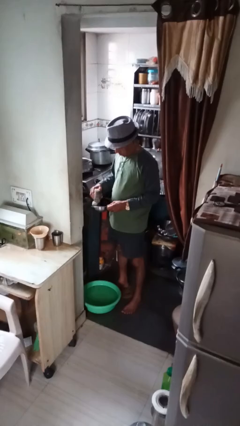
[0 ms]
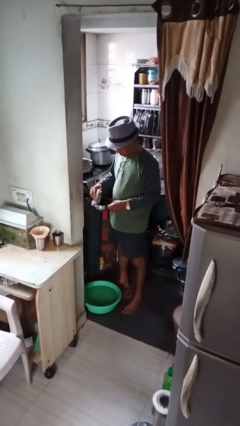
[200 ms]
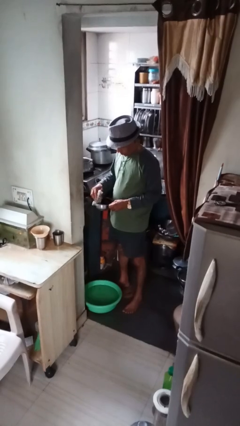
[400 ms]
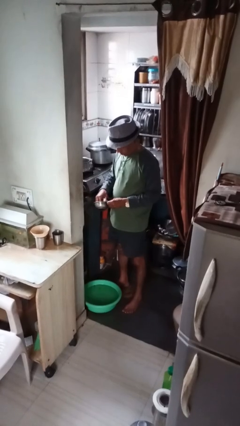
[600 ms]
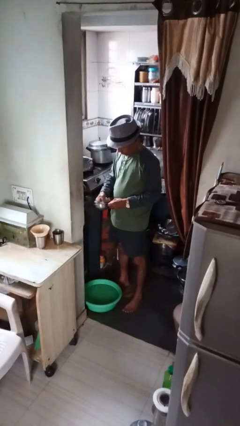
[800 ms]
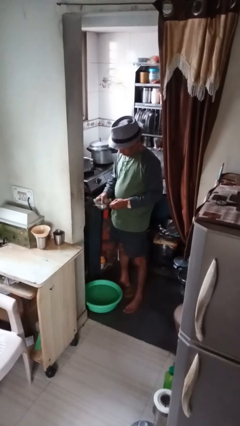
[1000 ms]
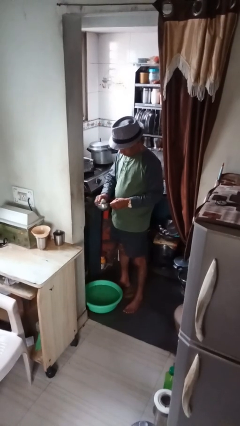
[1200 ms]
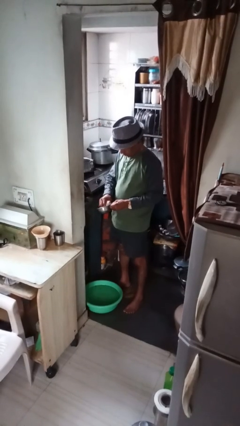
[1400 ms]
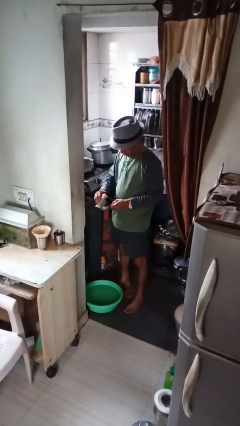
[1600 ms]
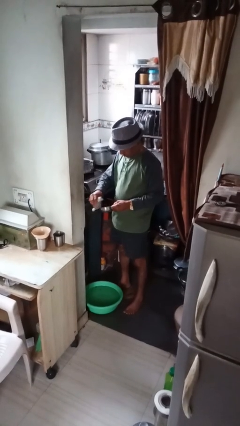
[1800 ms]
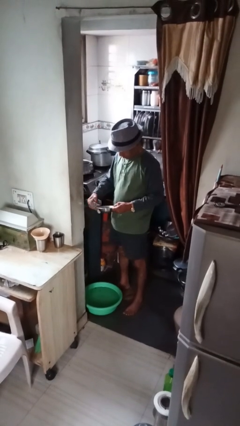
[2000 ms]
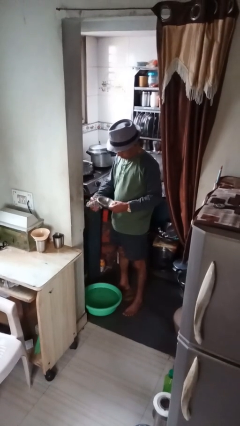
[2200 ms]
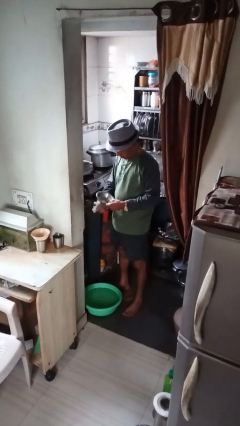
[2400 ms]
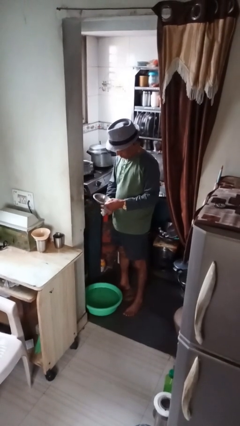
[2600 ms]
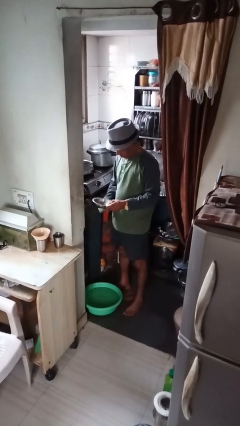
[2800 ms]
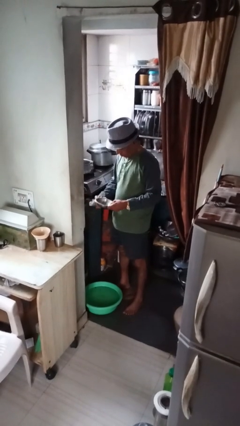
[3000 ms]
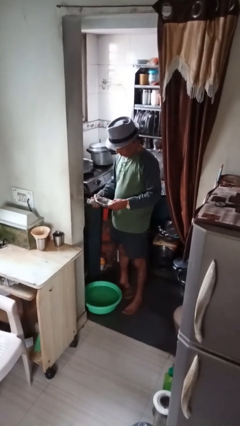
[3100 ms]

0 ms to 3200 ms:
person dries dish

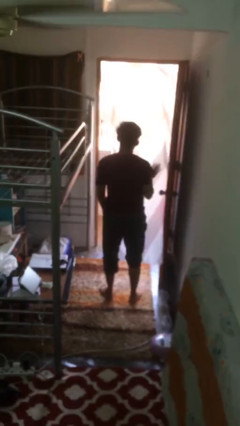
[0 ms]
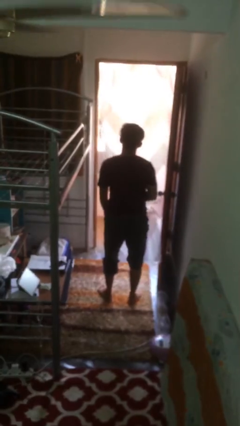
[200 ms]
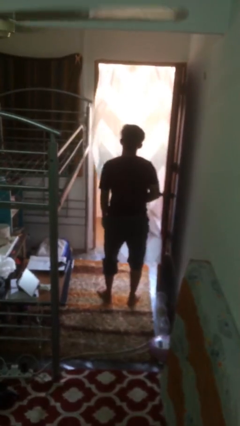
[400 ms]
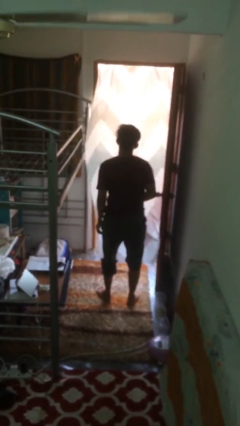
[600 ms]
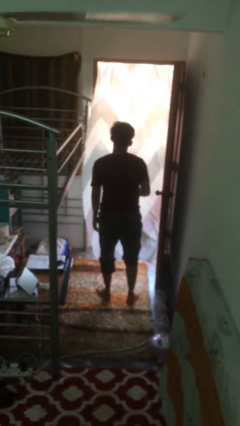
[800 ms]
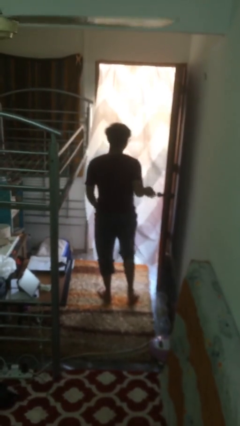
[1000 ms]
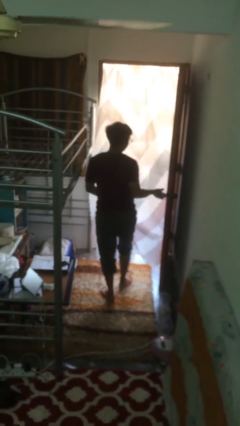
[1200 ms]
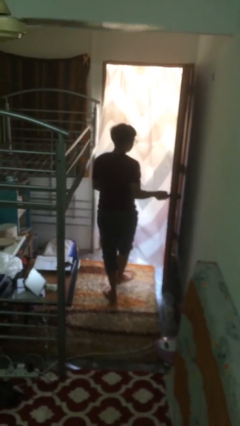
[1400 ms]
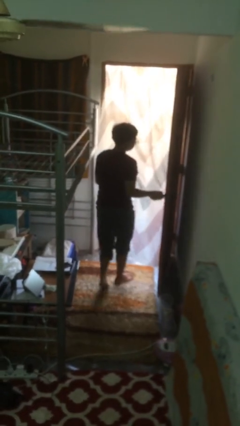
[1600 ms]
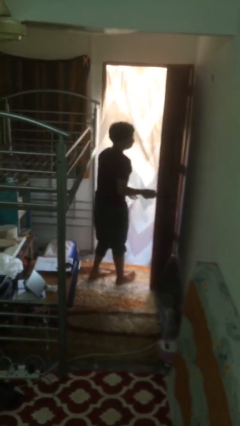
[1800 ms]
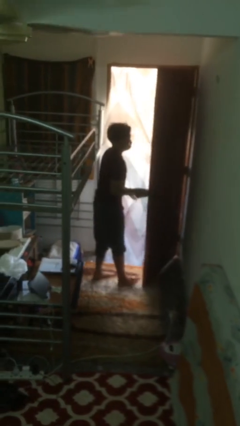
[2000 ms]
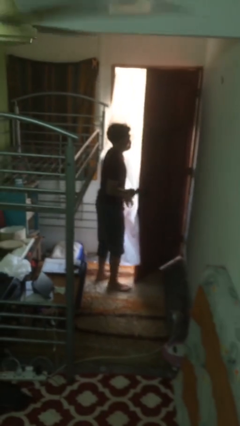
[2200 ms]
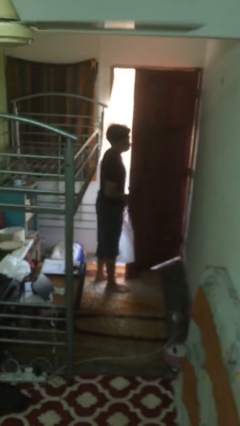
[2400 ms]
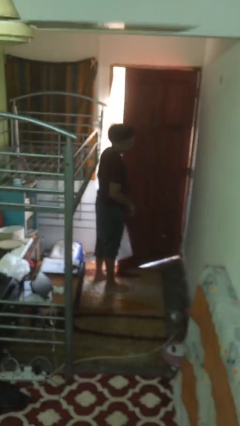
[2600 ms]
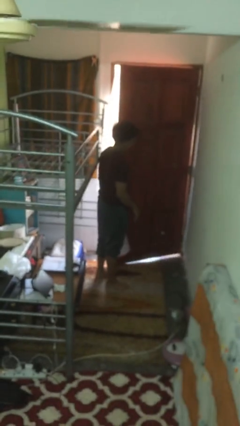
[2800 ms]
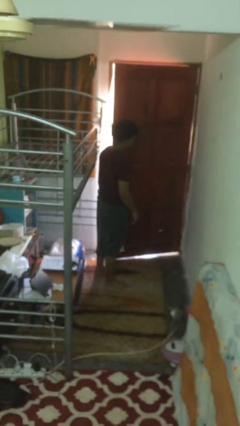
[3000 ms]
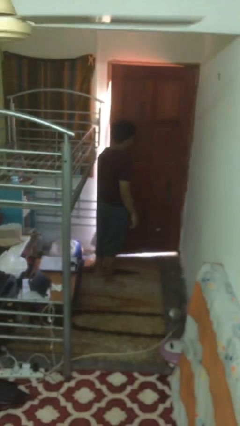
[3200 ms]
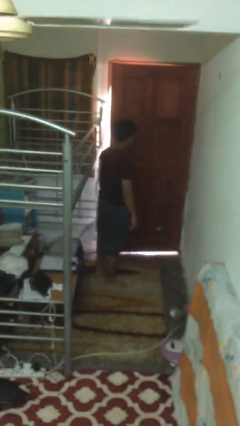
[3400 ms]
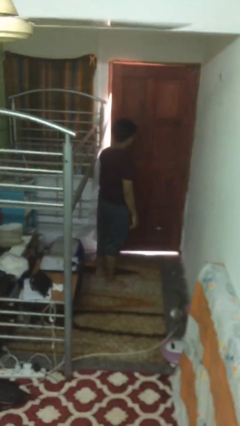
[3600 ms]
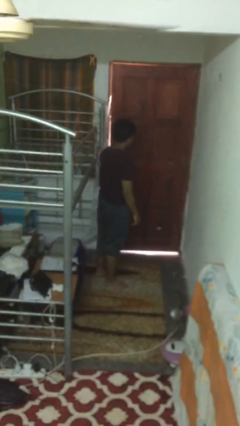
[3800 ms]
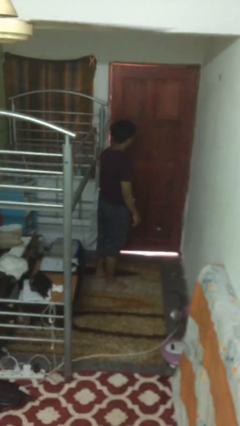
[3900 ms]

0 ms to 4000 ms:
person closes facility door

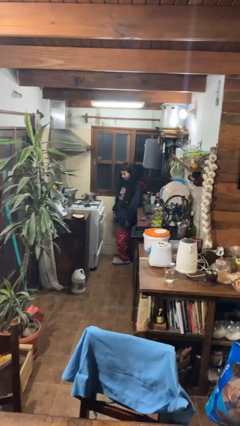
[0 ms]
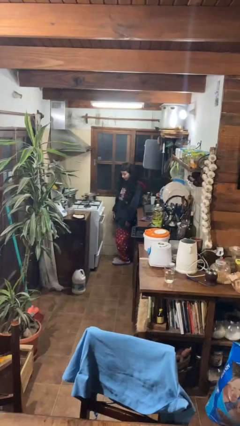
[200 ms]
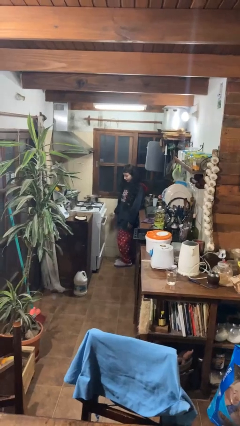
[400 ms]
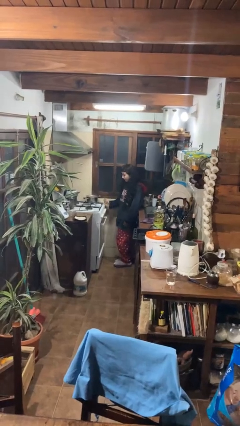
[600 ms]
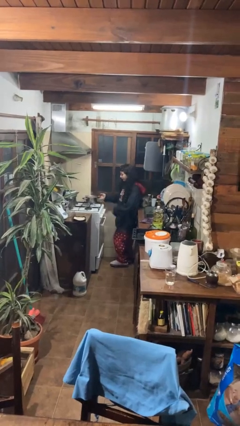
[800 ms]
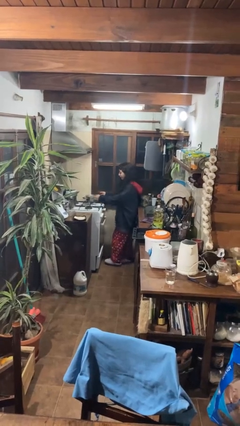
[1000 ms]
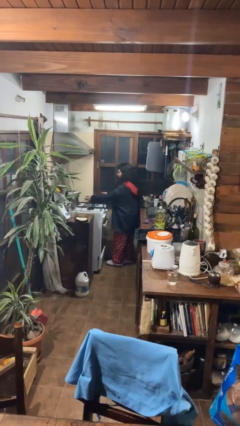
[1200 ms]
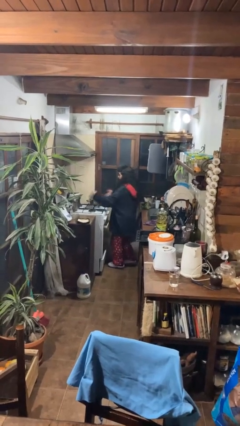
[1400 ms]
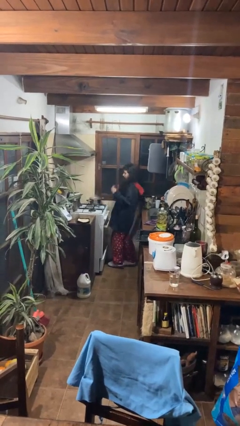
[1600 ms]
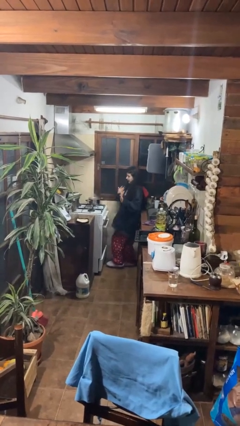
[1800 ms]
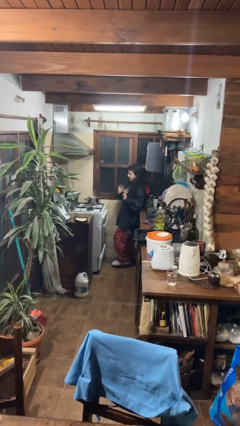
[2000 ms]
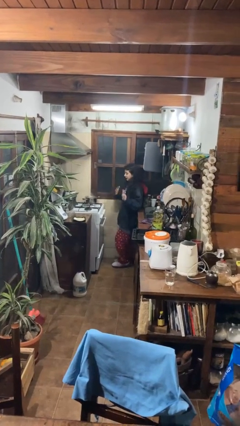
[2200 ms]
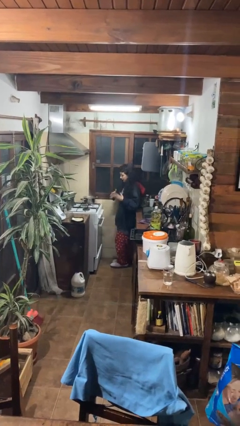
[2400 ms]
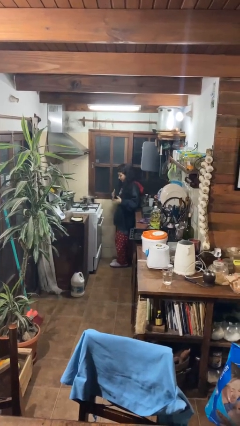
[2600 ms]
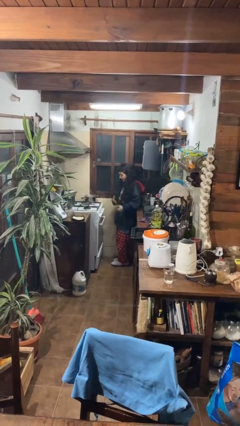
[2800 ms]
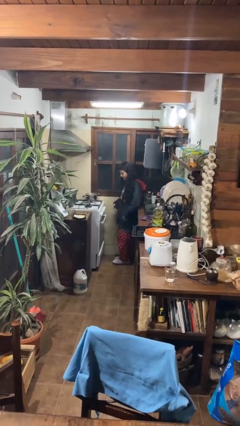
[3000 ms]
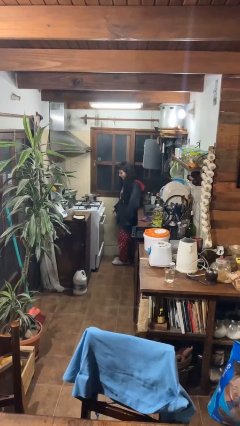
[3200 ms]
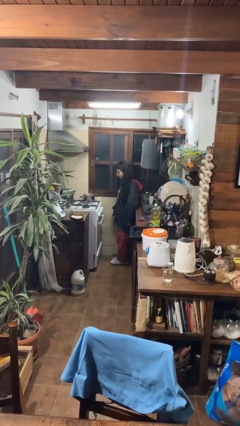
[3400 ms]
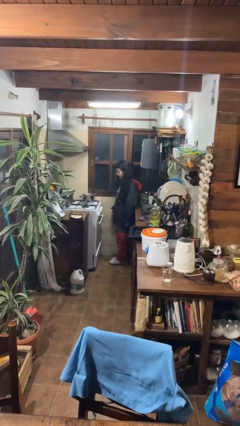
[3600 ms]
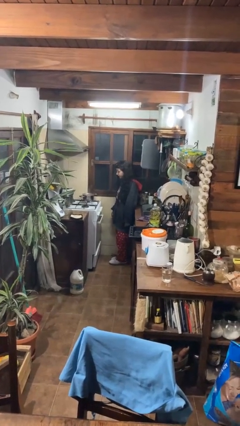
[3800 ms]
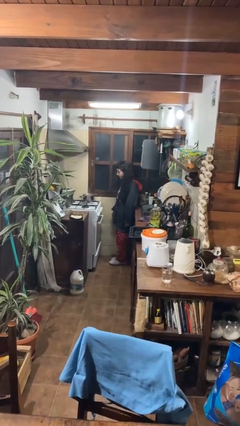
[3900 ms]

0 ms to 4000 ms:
person burns hand

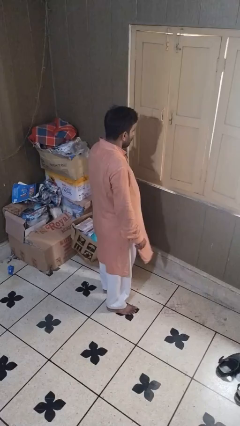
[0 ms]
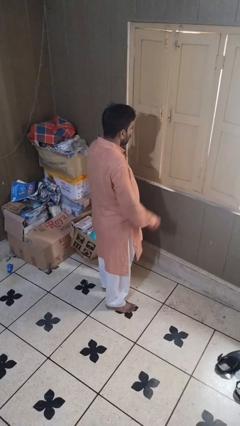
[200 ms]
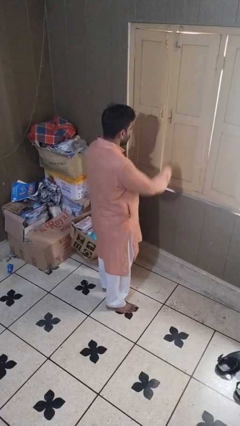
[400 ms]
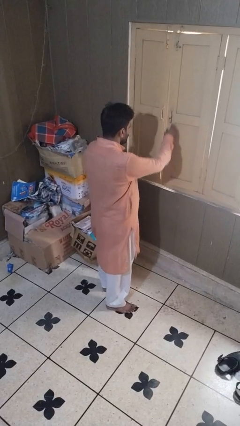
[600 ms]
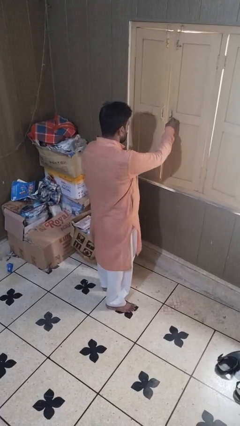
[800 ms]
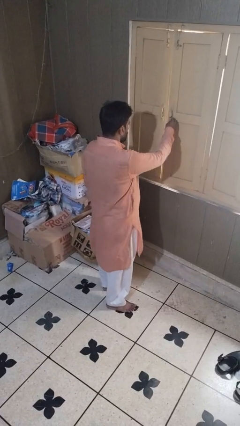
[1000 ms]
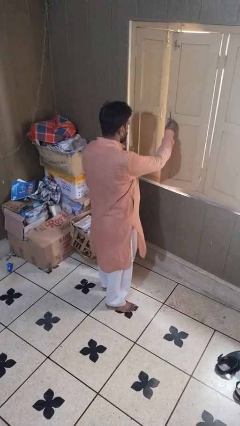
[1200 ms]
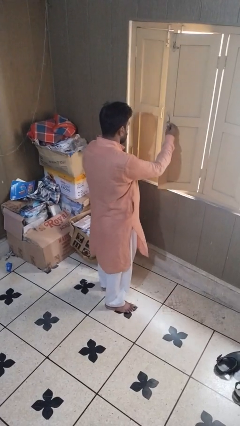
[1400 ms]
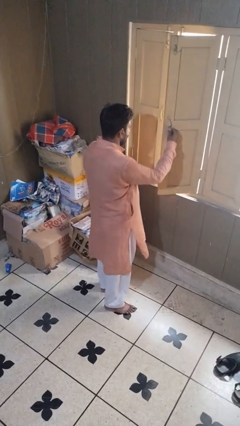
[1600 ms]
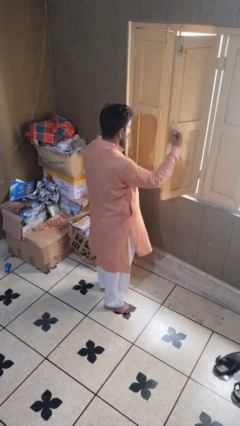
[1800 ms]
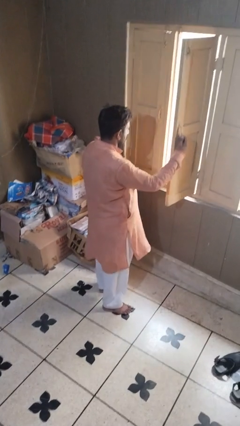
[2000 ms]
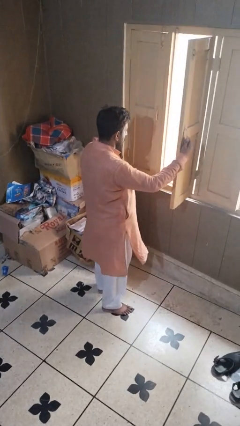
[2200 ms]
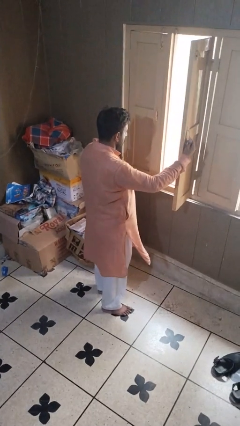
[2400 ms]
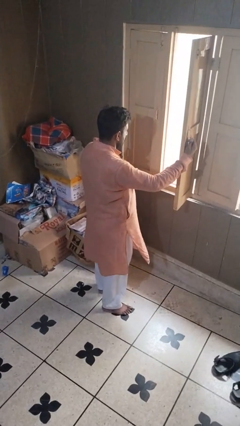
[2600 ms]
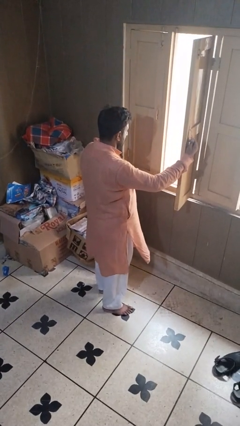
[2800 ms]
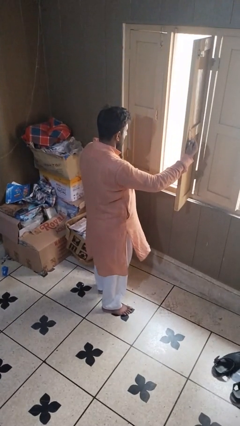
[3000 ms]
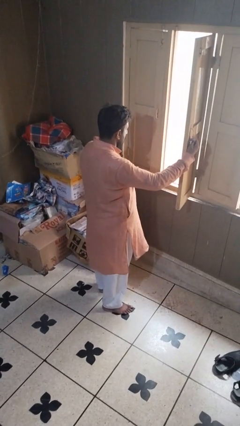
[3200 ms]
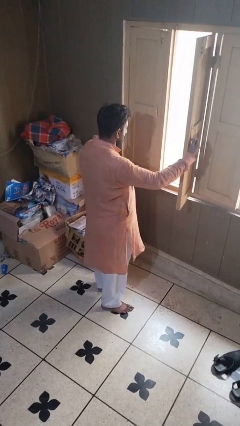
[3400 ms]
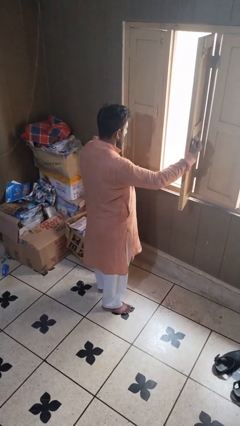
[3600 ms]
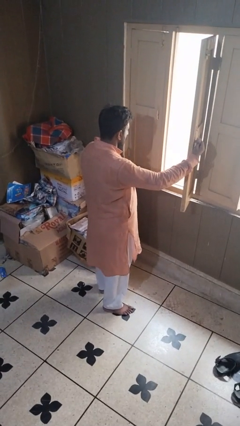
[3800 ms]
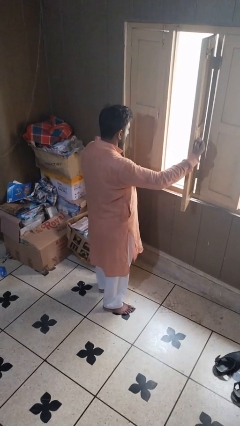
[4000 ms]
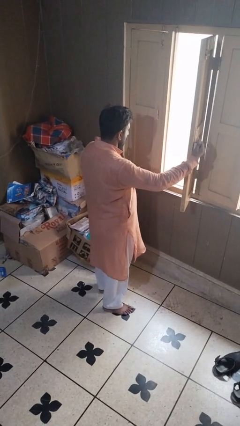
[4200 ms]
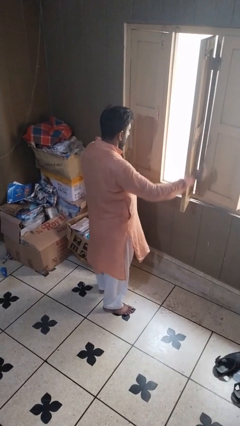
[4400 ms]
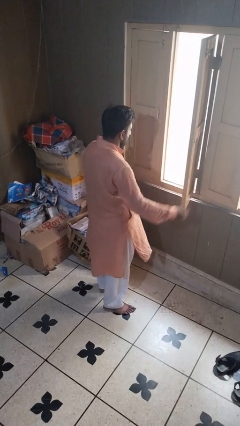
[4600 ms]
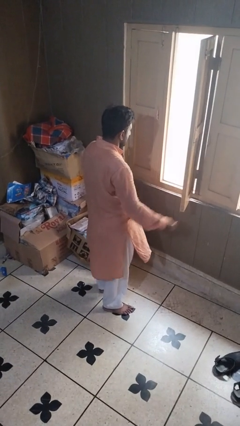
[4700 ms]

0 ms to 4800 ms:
person opens home window

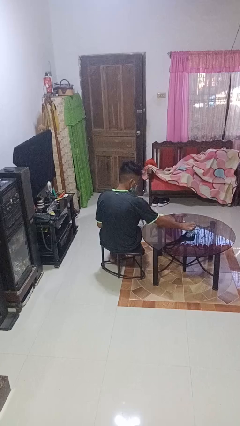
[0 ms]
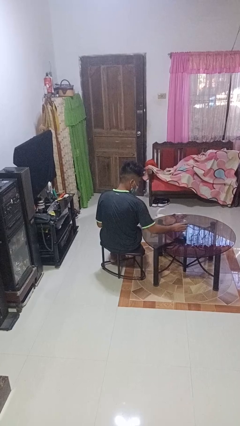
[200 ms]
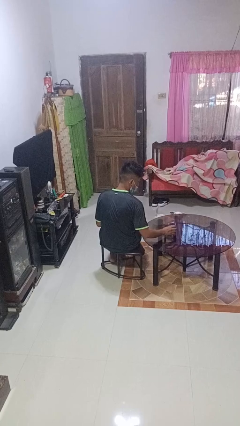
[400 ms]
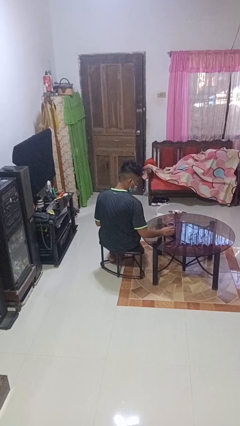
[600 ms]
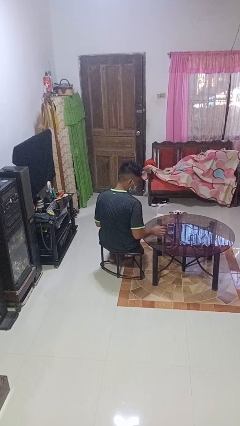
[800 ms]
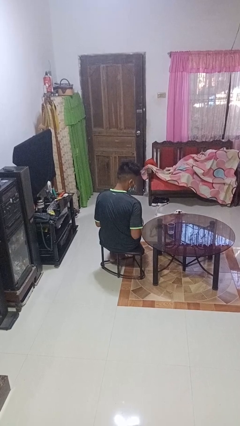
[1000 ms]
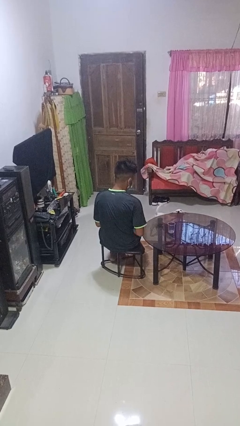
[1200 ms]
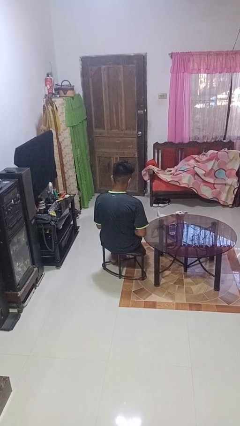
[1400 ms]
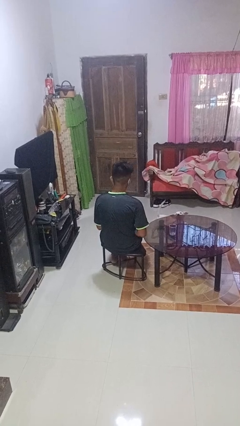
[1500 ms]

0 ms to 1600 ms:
person sets upright glass
